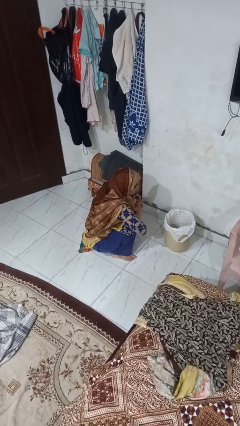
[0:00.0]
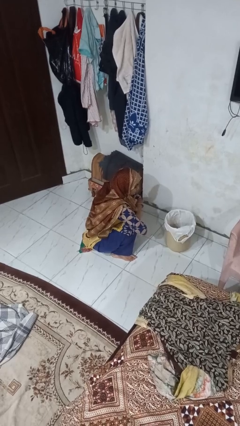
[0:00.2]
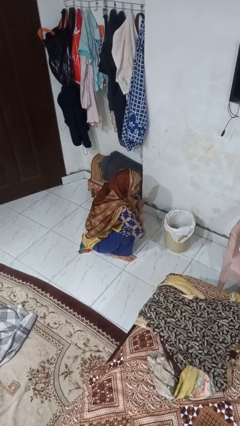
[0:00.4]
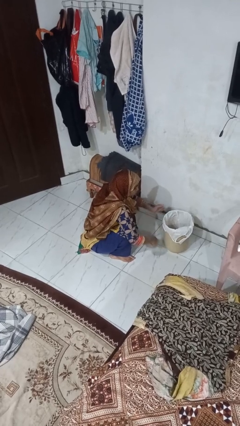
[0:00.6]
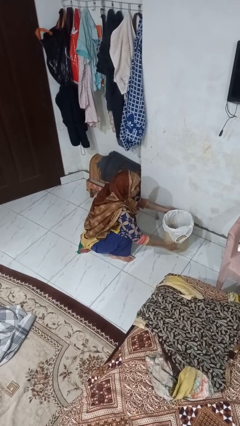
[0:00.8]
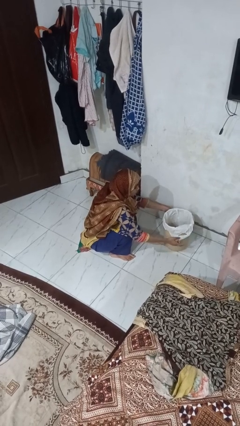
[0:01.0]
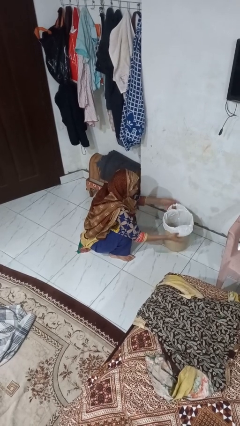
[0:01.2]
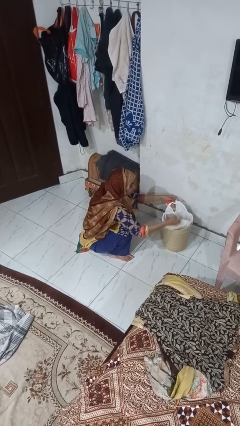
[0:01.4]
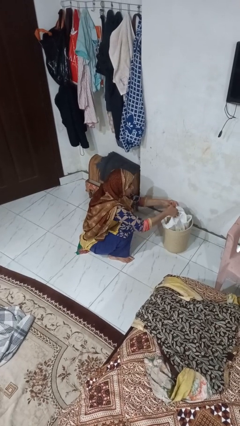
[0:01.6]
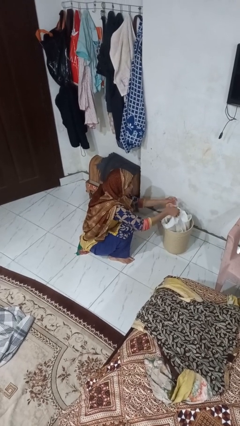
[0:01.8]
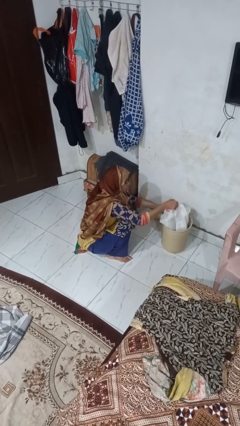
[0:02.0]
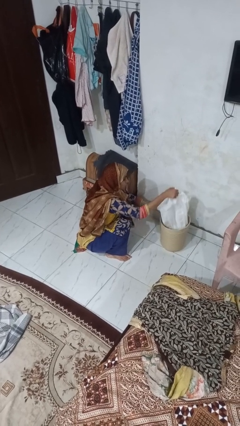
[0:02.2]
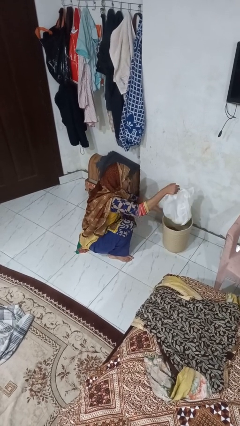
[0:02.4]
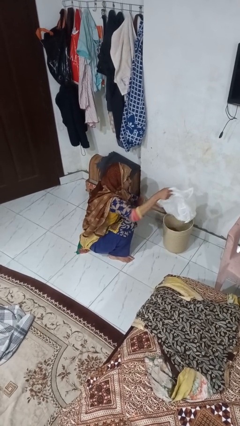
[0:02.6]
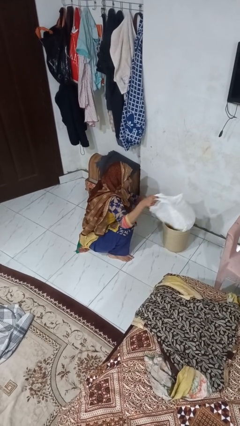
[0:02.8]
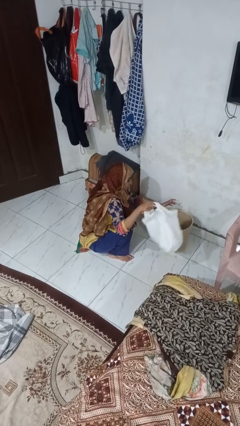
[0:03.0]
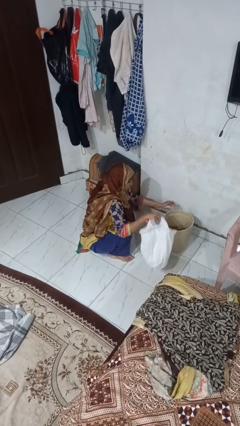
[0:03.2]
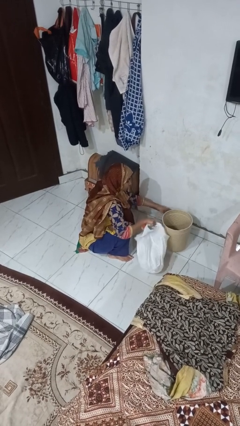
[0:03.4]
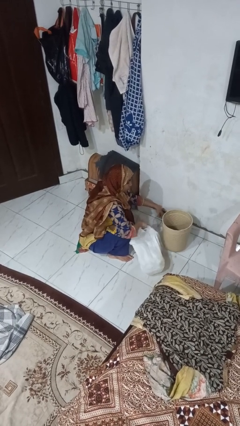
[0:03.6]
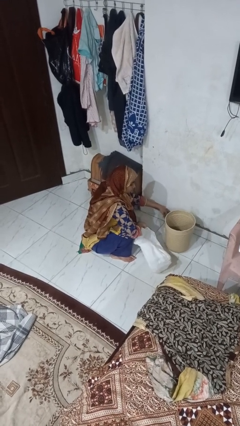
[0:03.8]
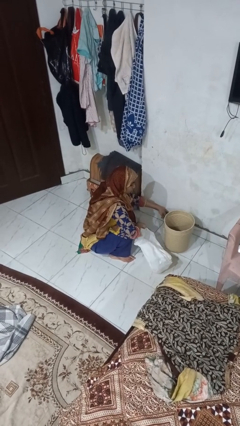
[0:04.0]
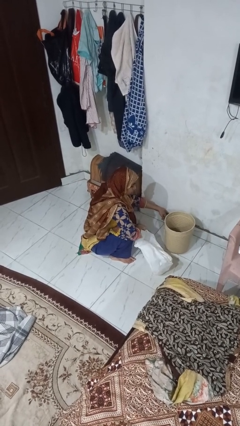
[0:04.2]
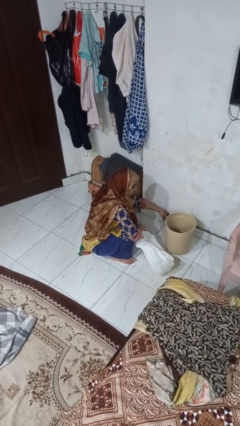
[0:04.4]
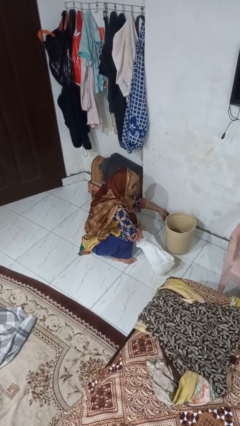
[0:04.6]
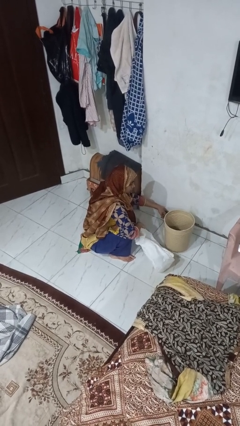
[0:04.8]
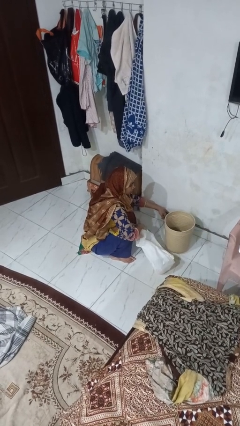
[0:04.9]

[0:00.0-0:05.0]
person removes trashbag from trashcan

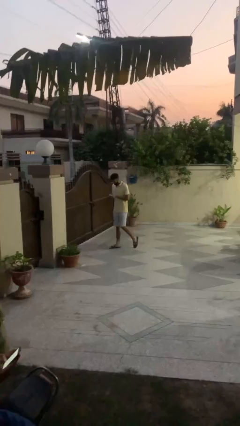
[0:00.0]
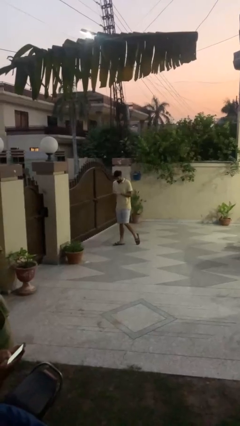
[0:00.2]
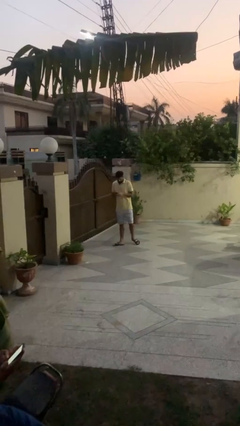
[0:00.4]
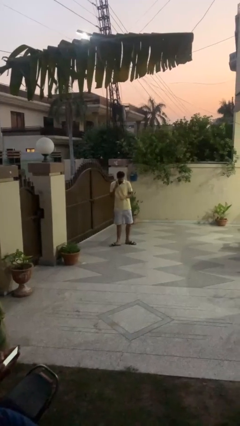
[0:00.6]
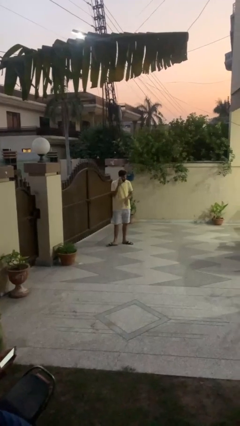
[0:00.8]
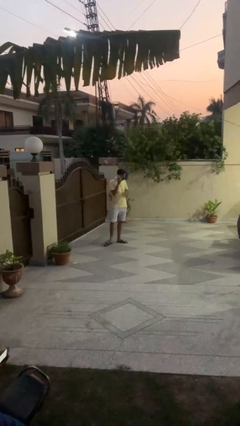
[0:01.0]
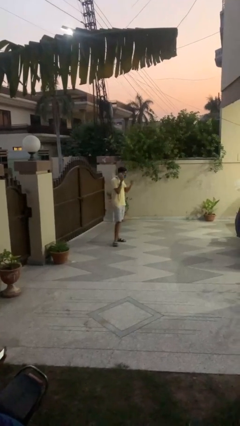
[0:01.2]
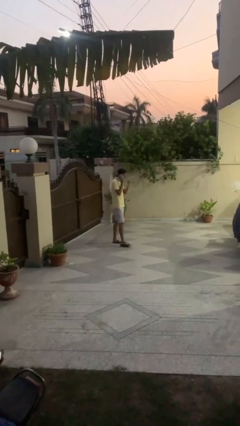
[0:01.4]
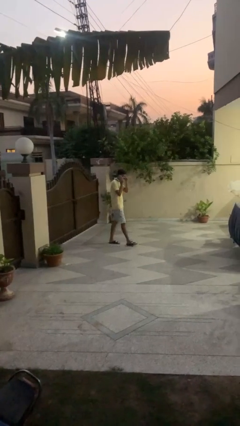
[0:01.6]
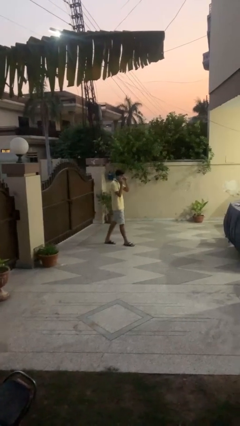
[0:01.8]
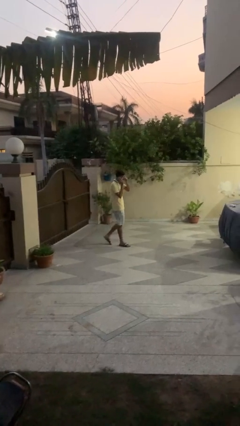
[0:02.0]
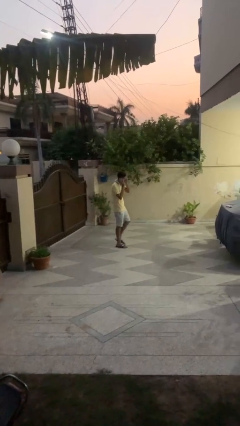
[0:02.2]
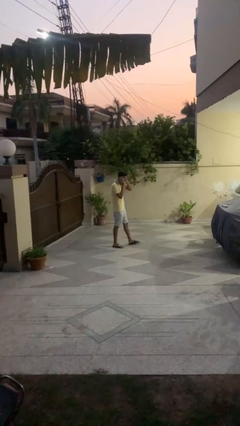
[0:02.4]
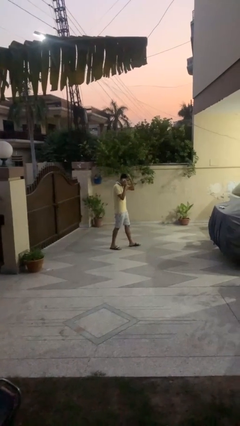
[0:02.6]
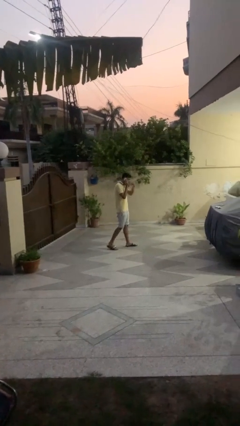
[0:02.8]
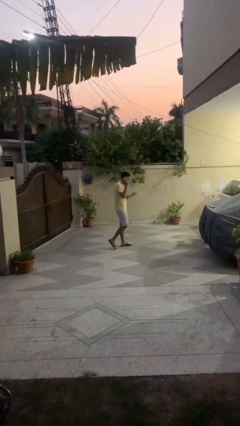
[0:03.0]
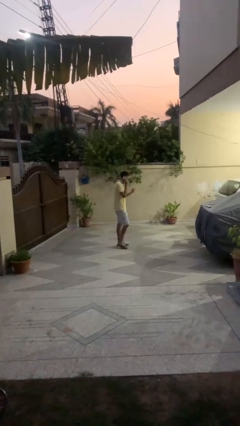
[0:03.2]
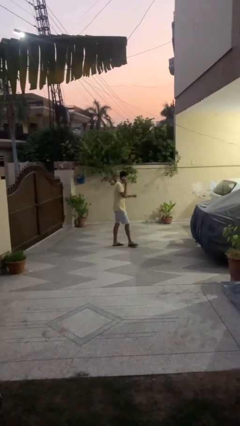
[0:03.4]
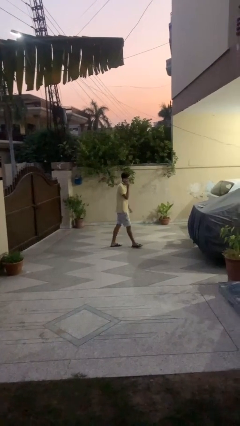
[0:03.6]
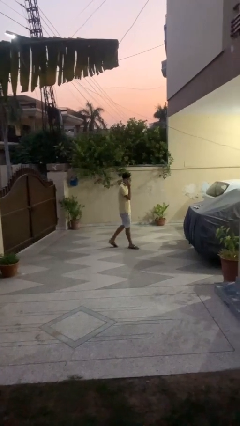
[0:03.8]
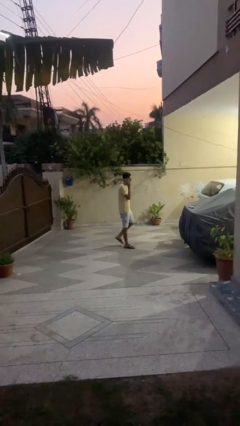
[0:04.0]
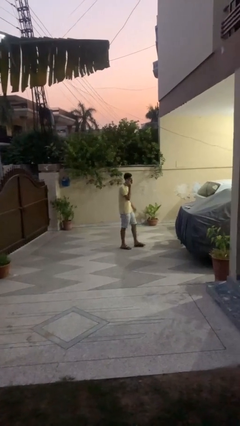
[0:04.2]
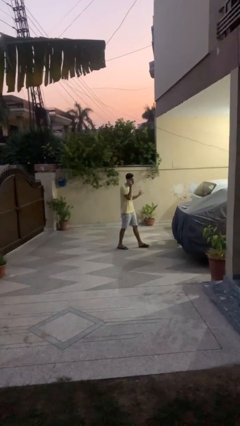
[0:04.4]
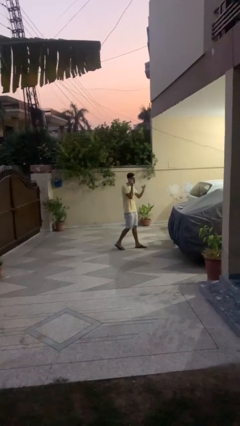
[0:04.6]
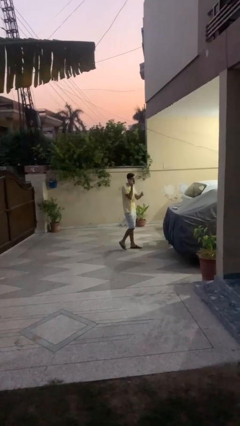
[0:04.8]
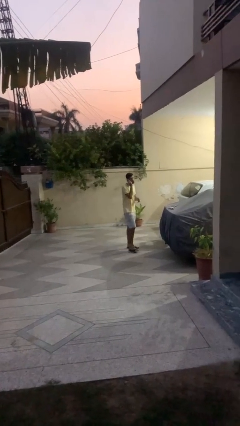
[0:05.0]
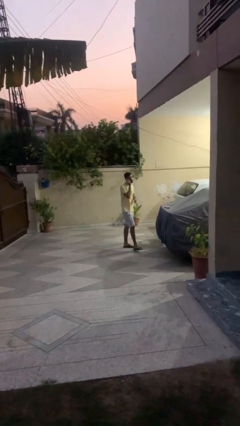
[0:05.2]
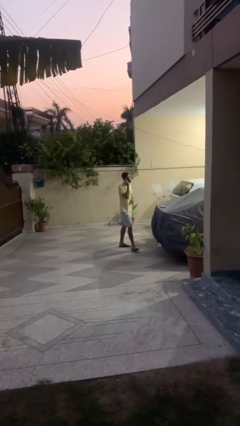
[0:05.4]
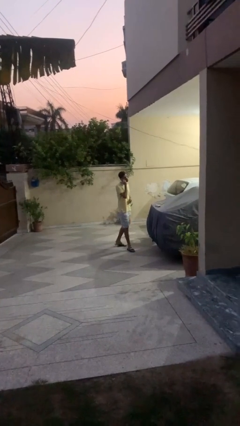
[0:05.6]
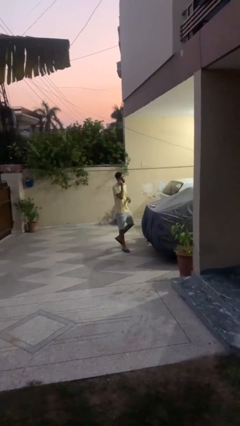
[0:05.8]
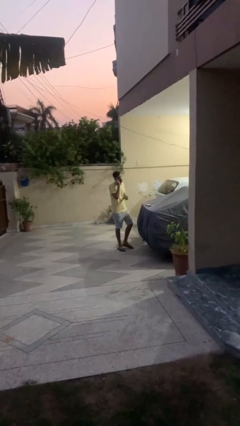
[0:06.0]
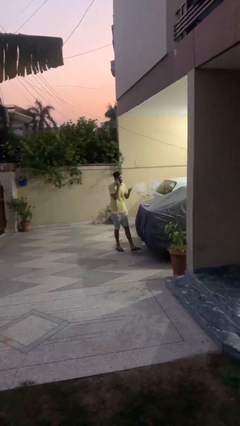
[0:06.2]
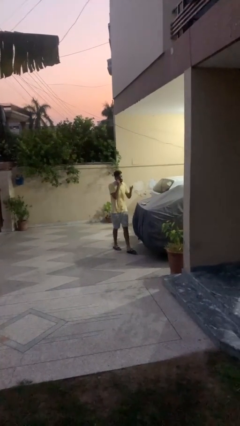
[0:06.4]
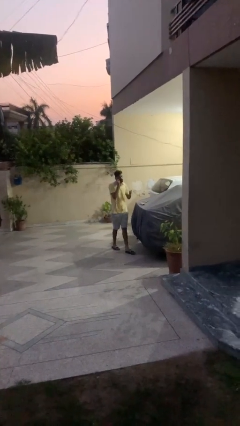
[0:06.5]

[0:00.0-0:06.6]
person talks on phone

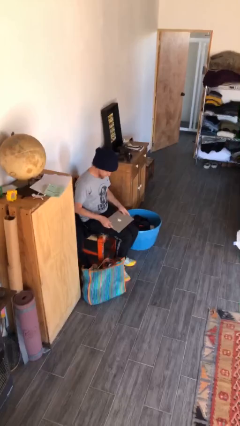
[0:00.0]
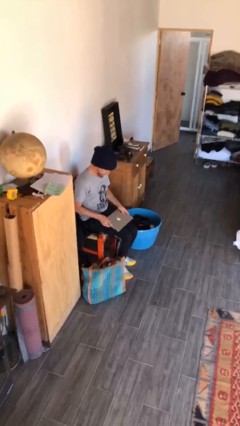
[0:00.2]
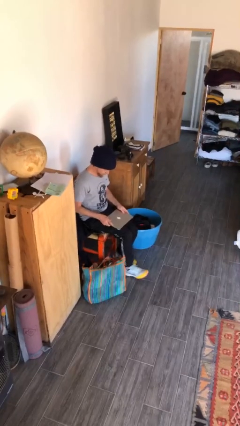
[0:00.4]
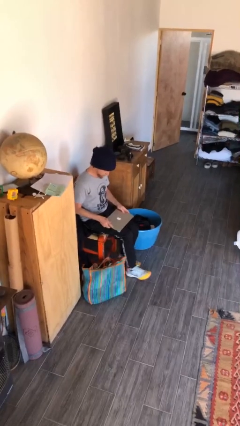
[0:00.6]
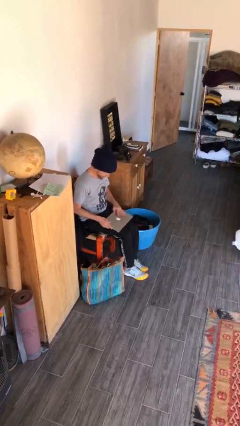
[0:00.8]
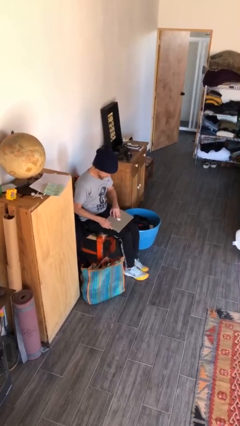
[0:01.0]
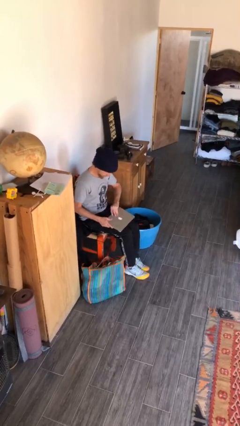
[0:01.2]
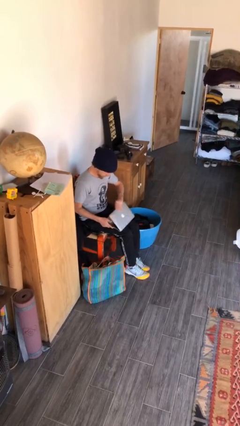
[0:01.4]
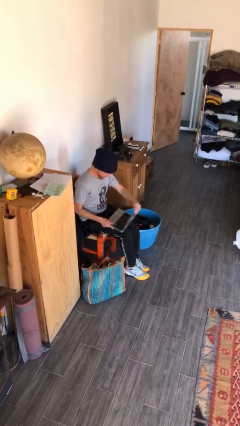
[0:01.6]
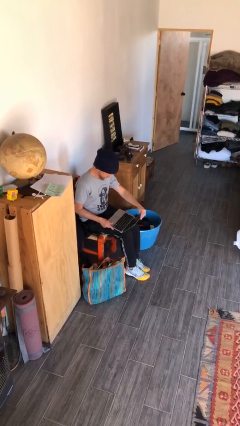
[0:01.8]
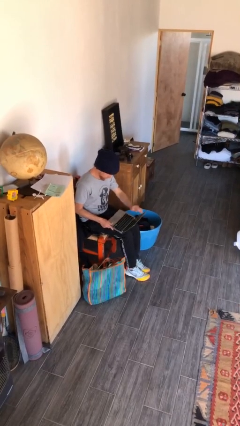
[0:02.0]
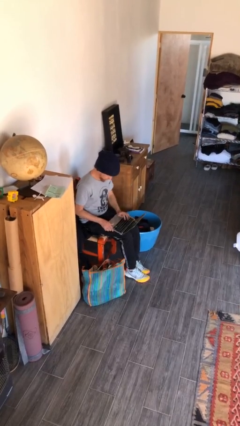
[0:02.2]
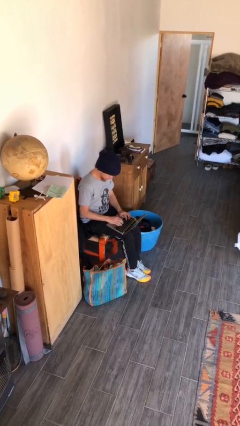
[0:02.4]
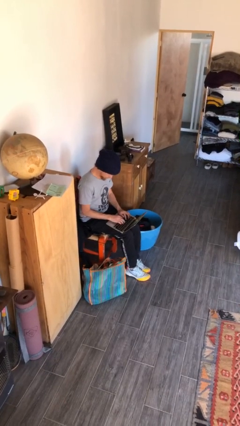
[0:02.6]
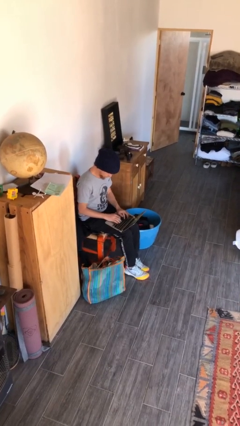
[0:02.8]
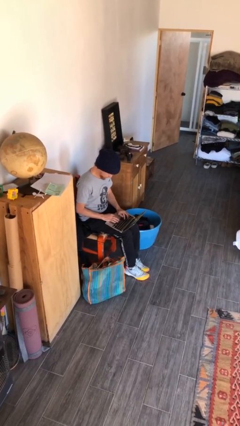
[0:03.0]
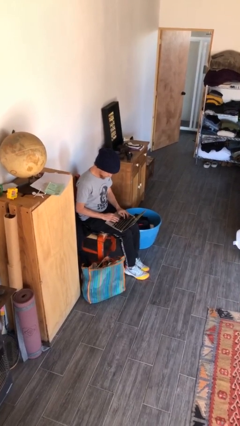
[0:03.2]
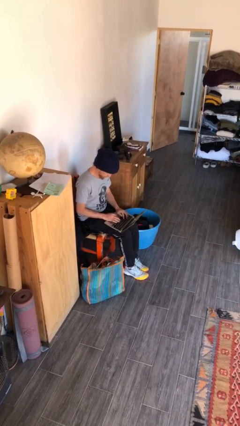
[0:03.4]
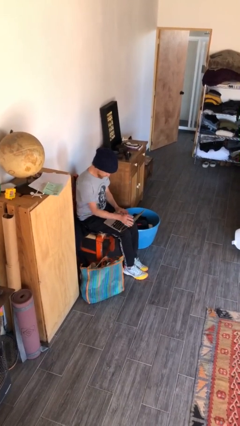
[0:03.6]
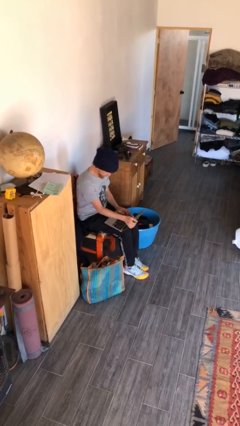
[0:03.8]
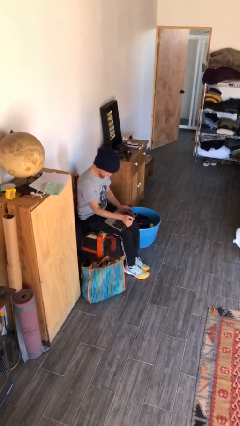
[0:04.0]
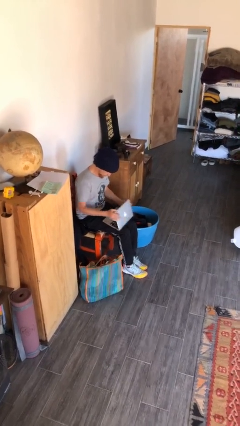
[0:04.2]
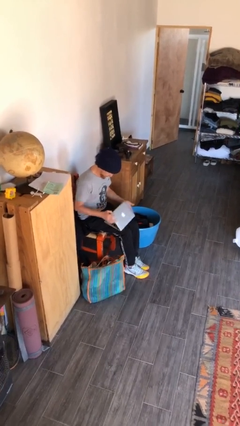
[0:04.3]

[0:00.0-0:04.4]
person interacts with laptop

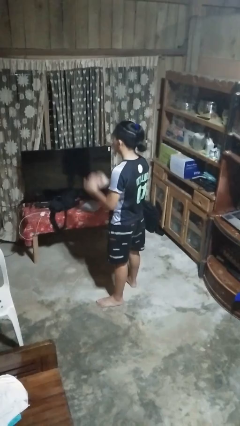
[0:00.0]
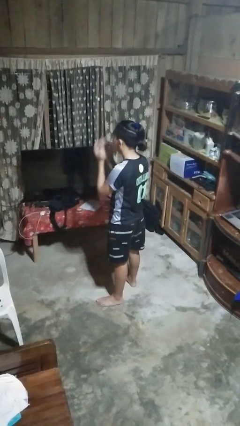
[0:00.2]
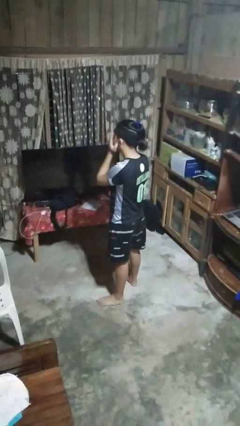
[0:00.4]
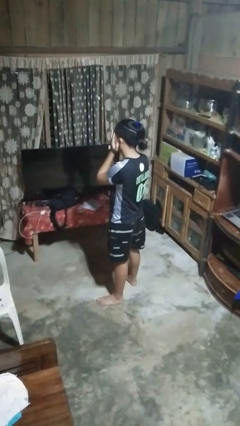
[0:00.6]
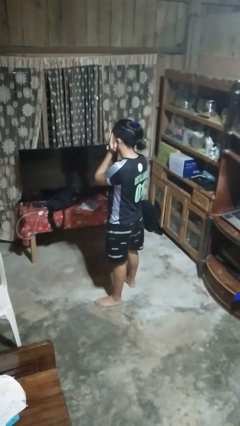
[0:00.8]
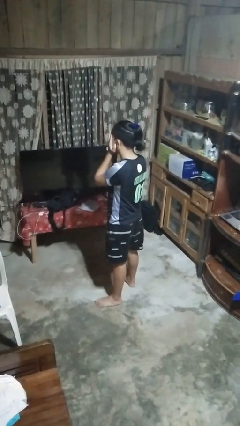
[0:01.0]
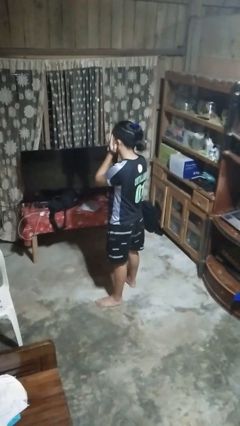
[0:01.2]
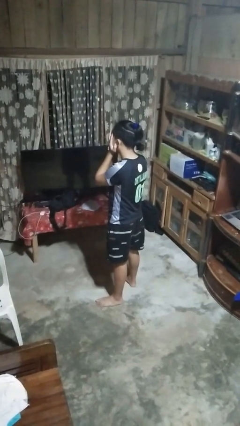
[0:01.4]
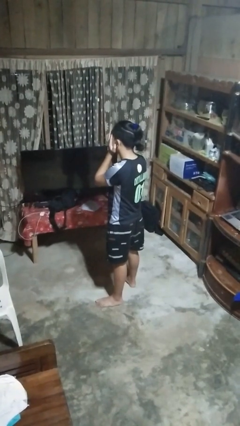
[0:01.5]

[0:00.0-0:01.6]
person covers face with hands
